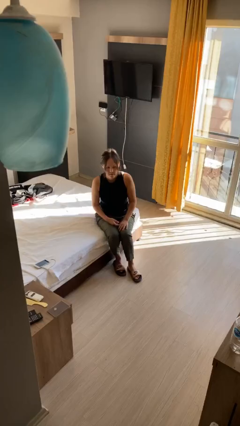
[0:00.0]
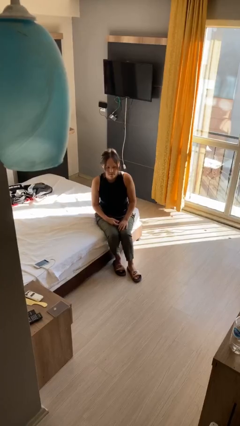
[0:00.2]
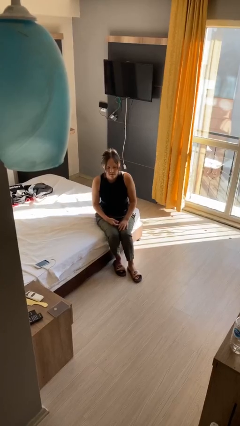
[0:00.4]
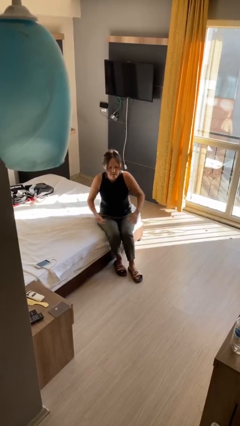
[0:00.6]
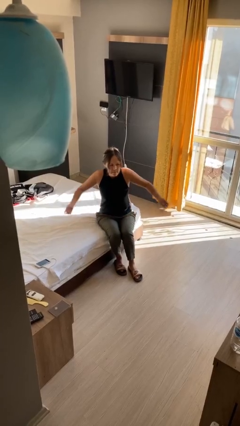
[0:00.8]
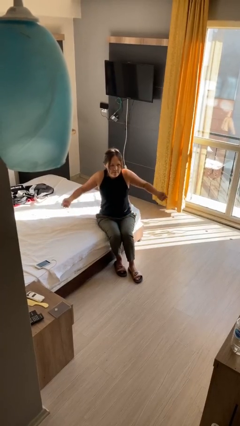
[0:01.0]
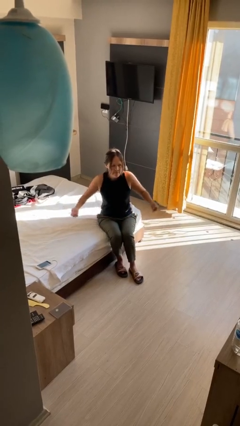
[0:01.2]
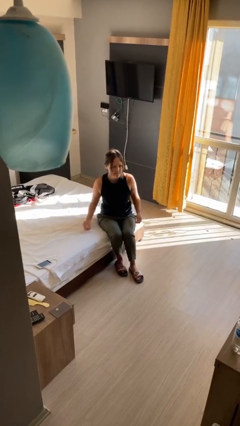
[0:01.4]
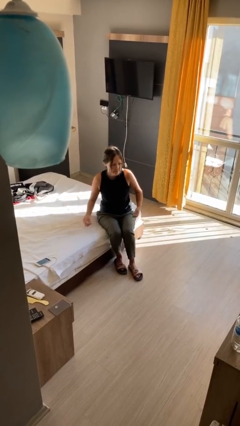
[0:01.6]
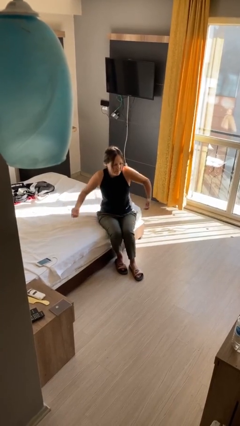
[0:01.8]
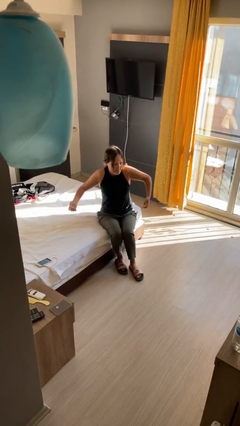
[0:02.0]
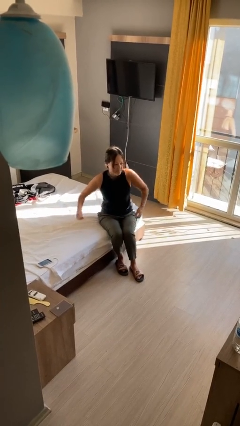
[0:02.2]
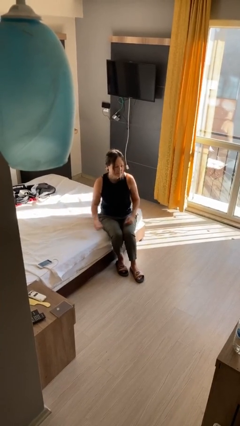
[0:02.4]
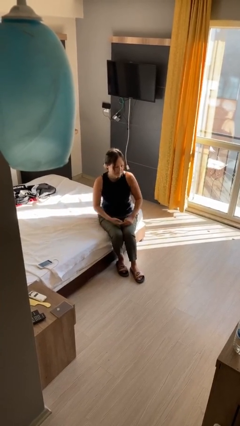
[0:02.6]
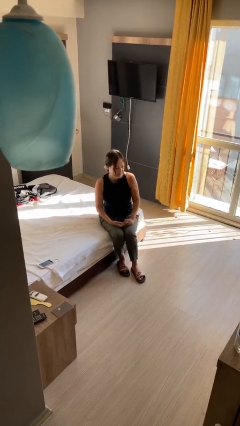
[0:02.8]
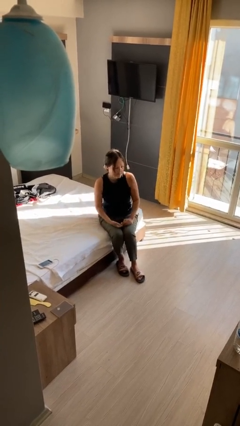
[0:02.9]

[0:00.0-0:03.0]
person shrugs

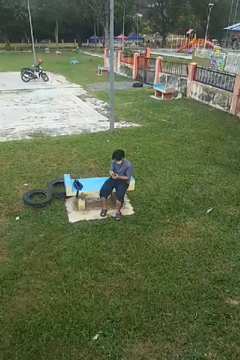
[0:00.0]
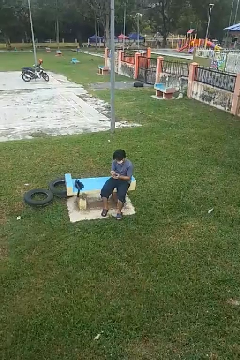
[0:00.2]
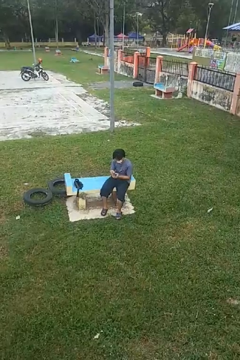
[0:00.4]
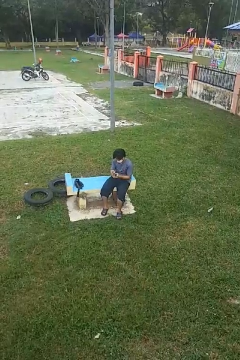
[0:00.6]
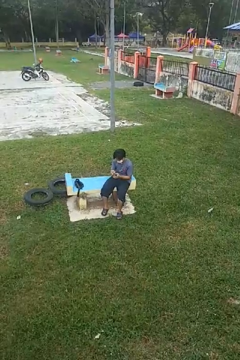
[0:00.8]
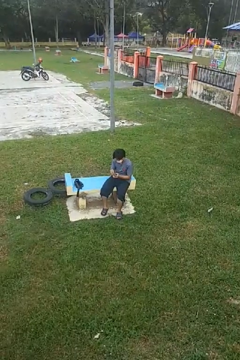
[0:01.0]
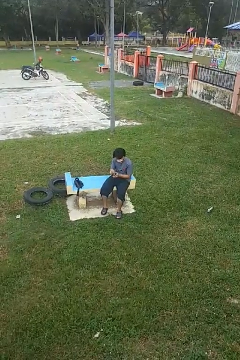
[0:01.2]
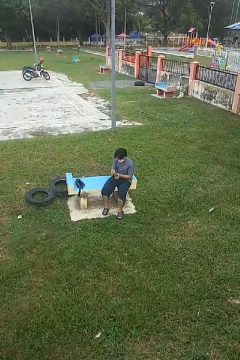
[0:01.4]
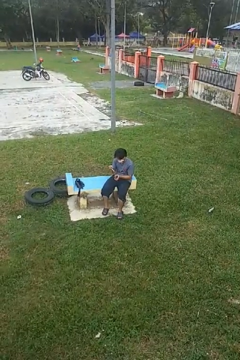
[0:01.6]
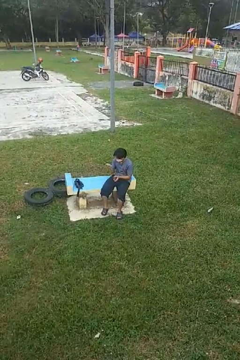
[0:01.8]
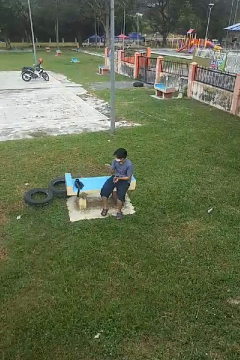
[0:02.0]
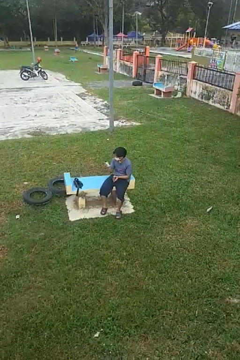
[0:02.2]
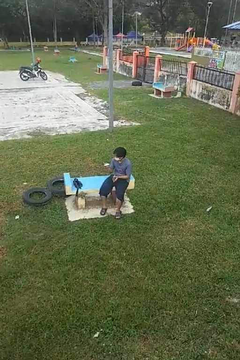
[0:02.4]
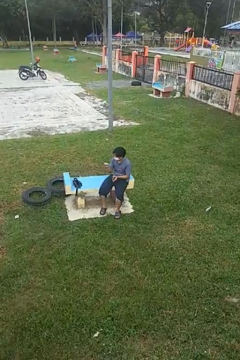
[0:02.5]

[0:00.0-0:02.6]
person takes object from purse

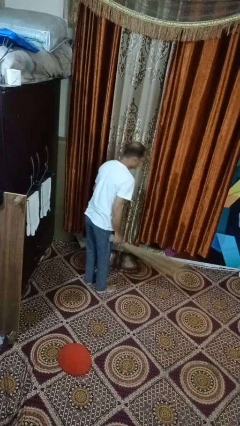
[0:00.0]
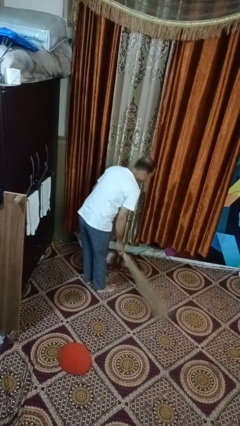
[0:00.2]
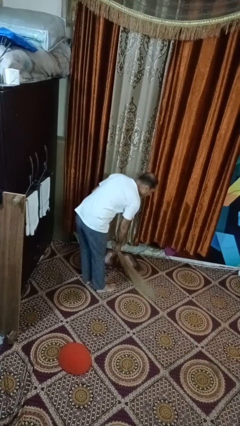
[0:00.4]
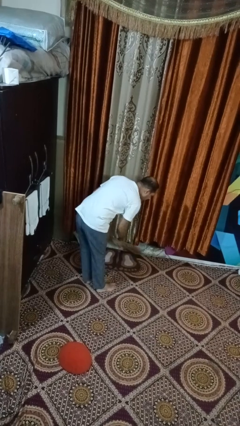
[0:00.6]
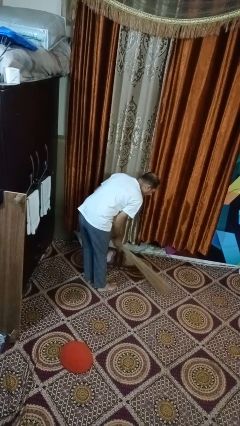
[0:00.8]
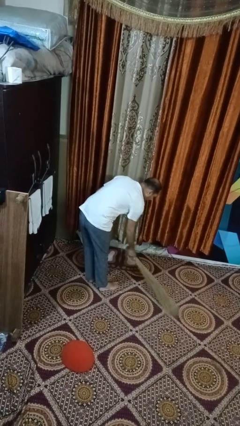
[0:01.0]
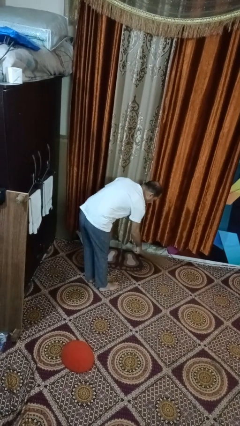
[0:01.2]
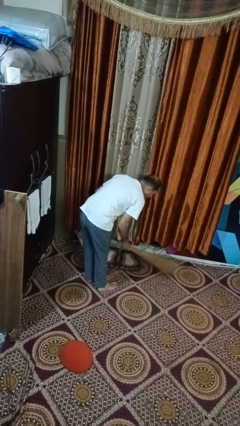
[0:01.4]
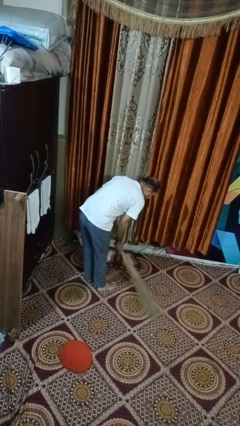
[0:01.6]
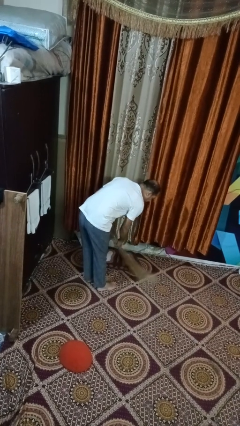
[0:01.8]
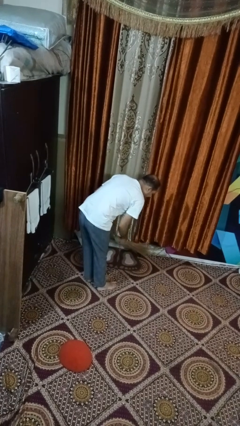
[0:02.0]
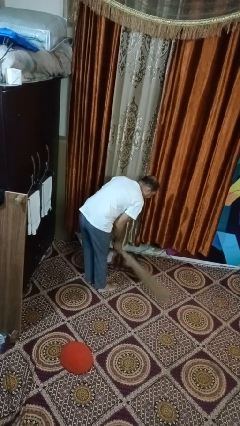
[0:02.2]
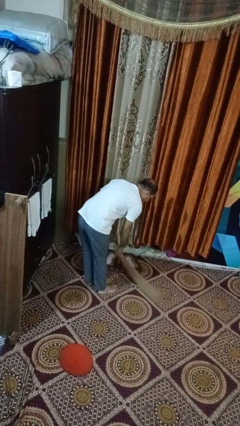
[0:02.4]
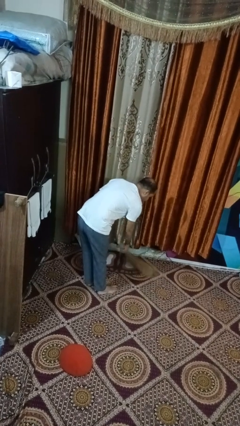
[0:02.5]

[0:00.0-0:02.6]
person sweeps floor

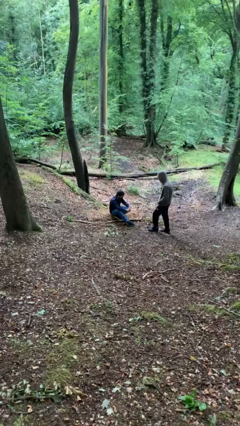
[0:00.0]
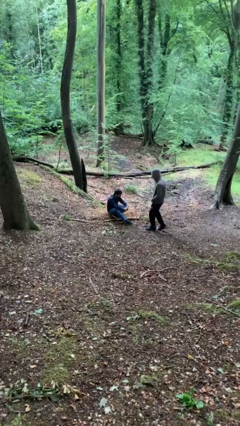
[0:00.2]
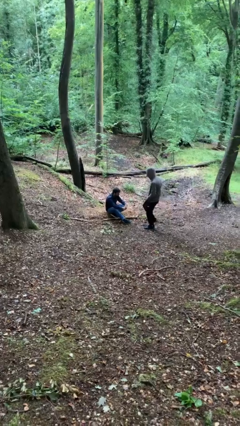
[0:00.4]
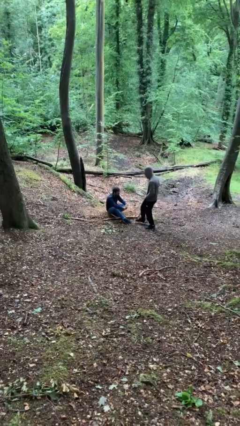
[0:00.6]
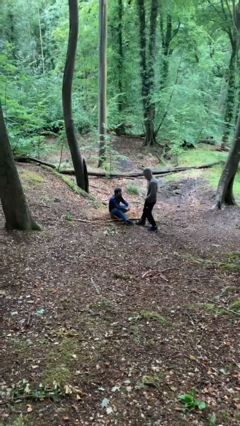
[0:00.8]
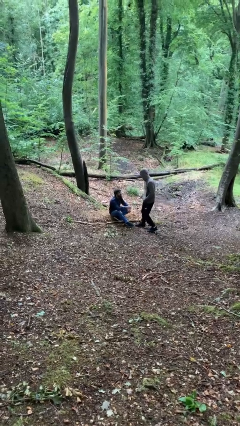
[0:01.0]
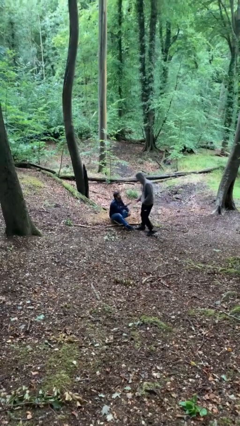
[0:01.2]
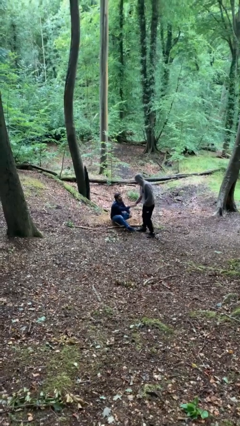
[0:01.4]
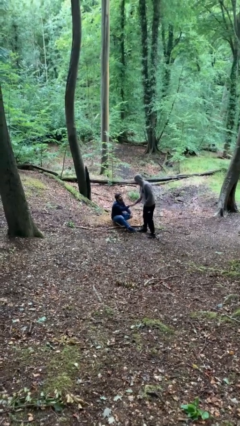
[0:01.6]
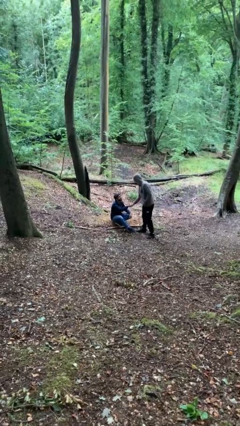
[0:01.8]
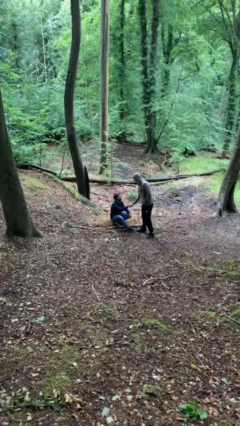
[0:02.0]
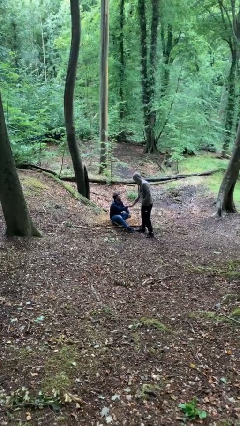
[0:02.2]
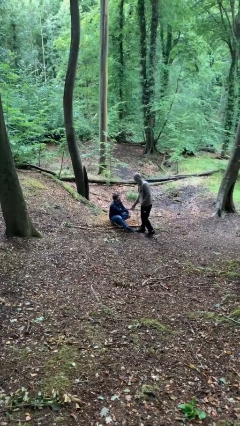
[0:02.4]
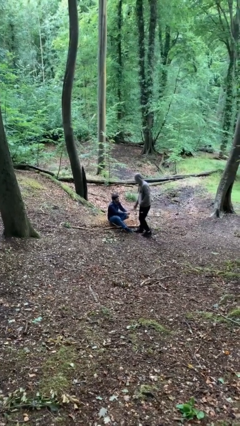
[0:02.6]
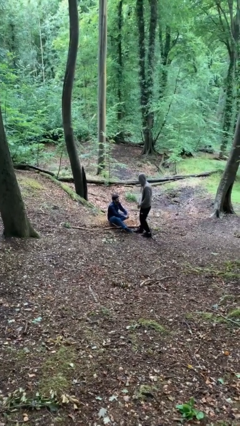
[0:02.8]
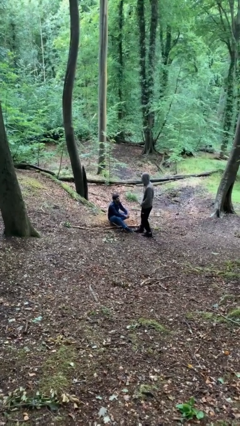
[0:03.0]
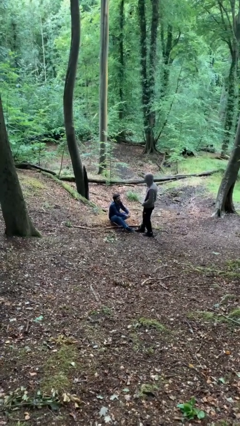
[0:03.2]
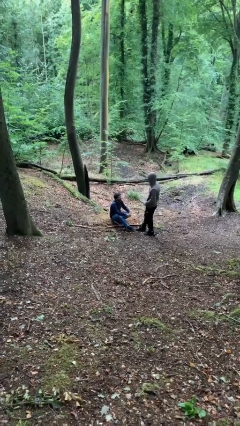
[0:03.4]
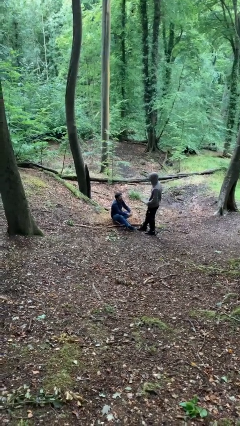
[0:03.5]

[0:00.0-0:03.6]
person shakes hand

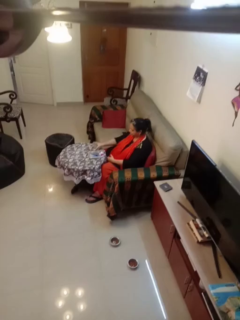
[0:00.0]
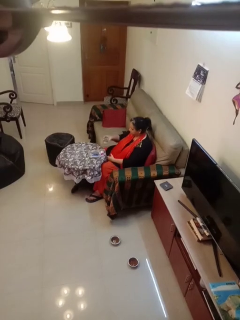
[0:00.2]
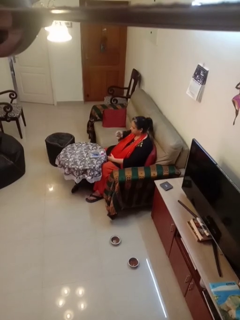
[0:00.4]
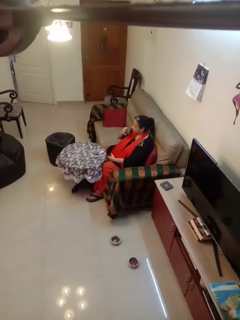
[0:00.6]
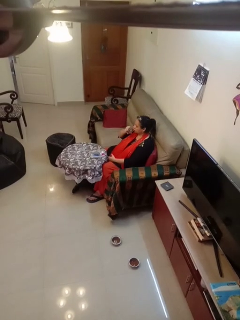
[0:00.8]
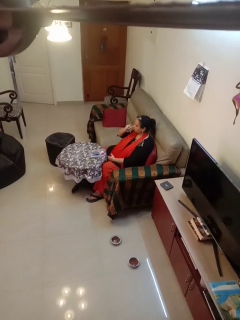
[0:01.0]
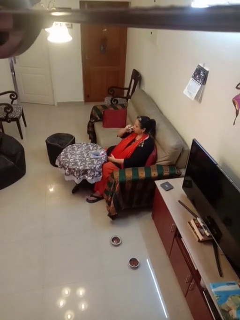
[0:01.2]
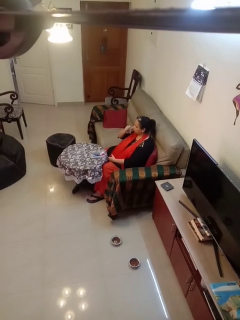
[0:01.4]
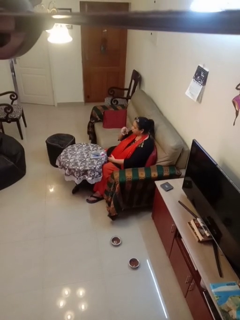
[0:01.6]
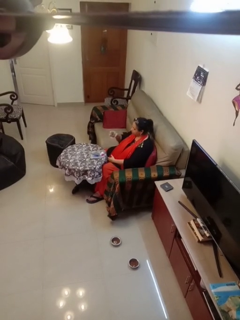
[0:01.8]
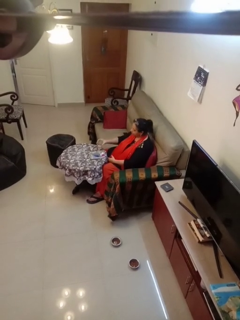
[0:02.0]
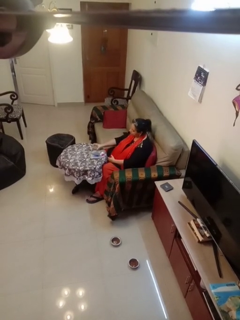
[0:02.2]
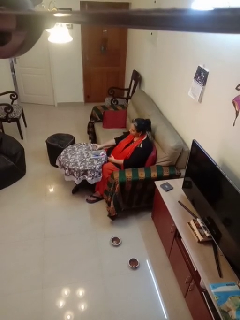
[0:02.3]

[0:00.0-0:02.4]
person drinks from cup

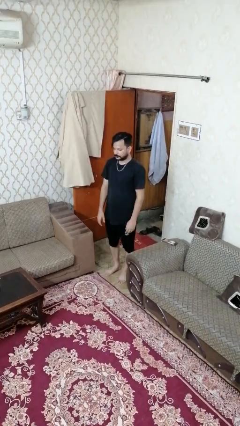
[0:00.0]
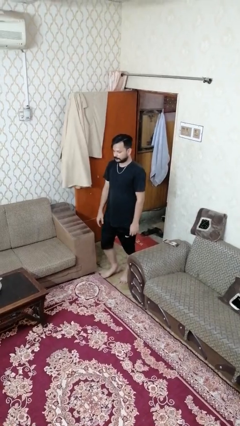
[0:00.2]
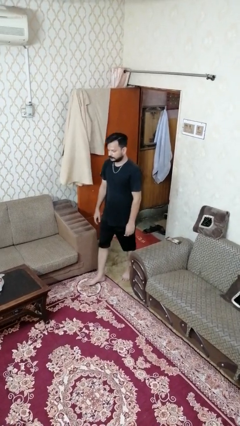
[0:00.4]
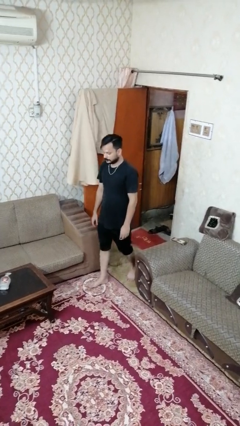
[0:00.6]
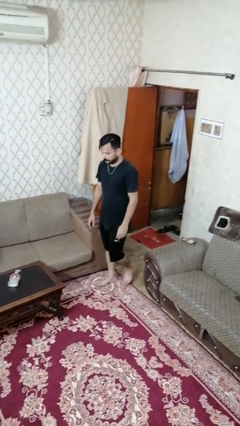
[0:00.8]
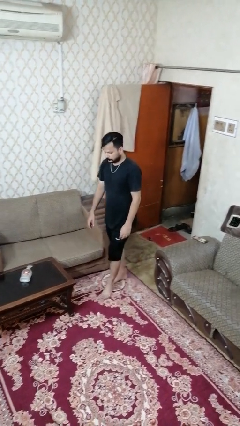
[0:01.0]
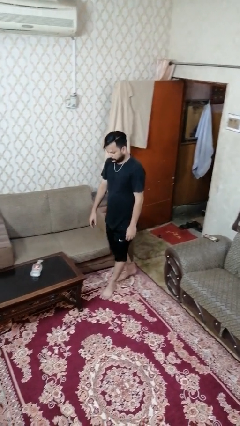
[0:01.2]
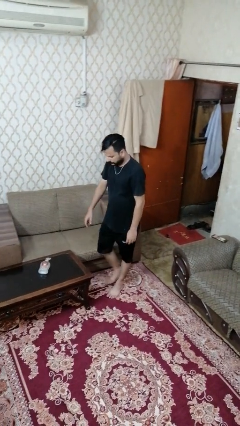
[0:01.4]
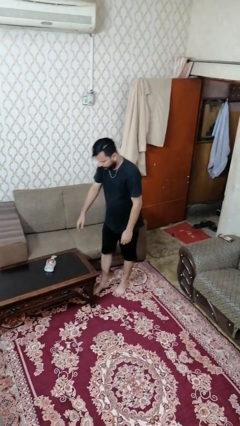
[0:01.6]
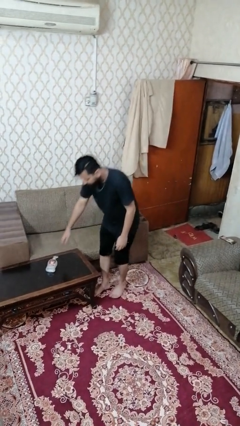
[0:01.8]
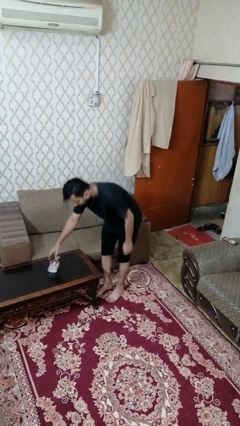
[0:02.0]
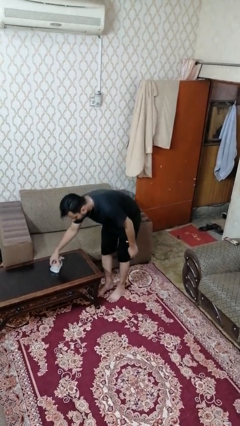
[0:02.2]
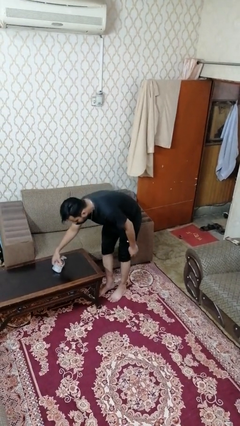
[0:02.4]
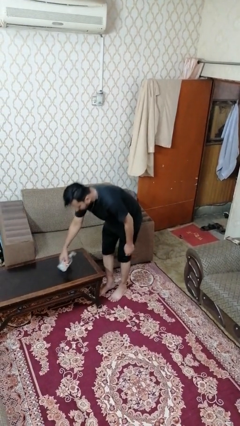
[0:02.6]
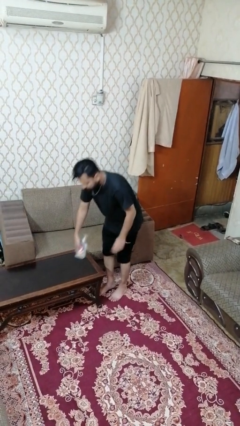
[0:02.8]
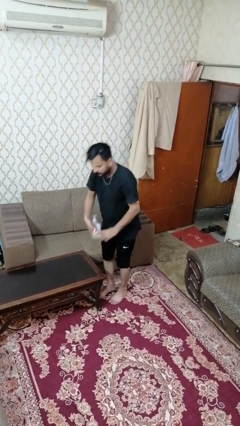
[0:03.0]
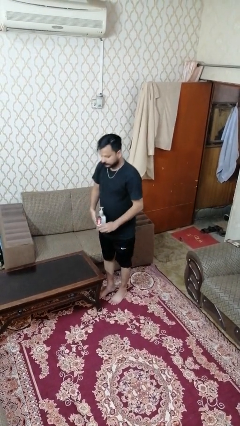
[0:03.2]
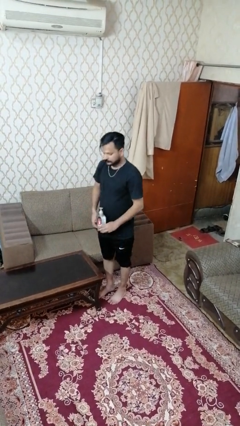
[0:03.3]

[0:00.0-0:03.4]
person picks up object from table

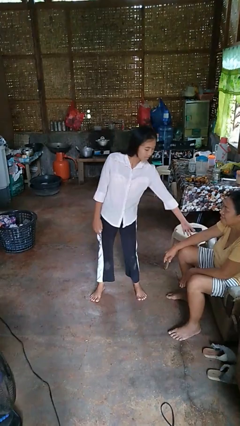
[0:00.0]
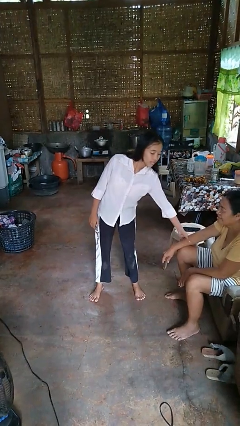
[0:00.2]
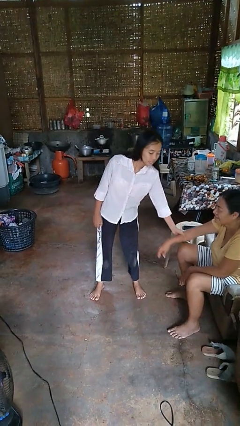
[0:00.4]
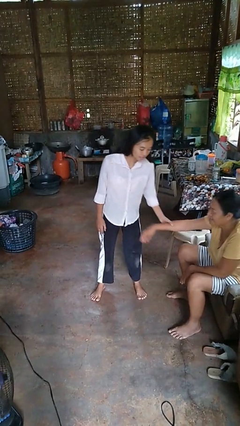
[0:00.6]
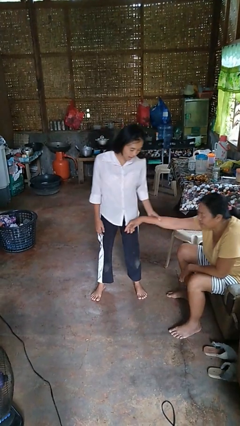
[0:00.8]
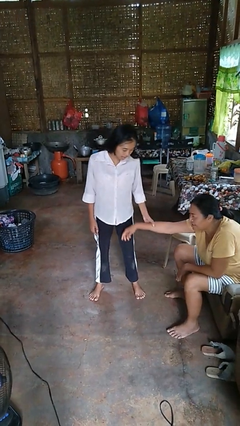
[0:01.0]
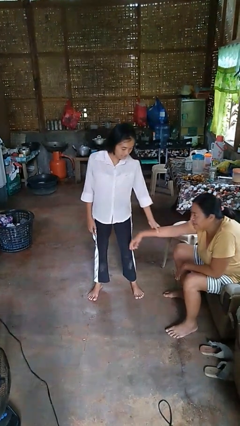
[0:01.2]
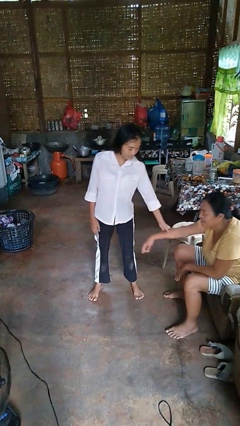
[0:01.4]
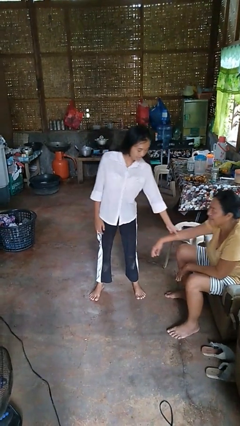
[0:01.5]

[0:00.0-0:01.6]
person grabs person by forearm
